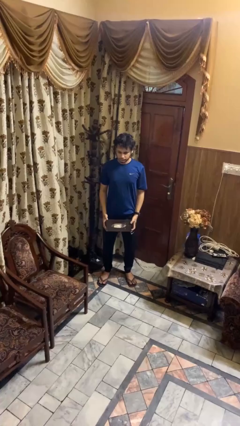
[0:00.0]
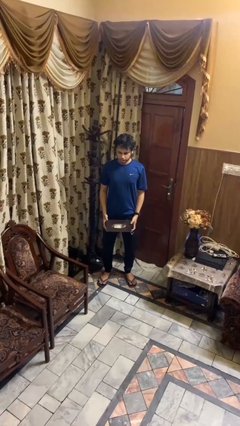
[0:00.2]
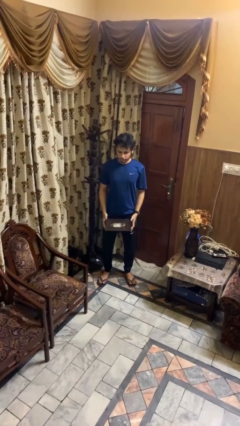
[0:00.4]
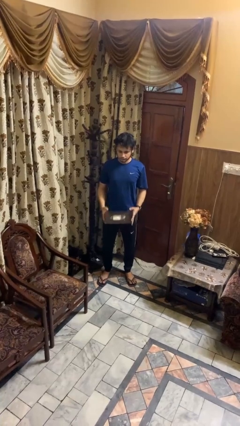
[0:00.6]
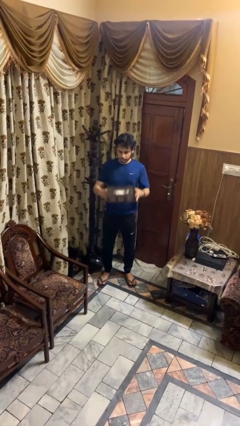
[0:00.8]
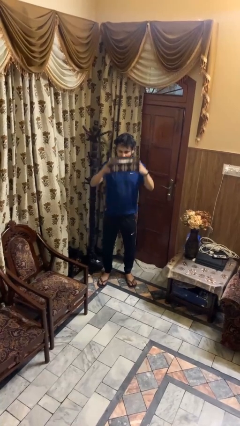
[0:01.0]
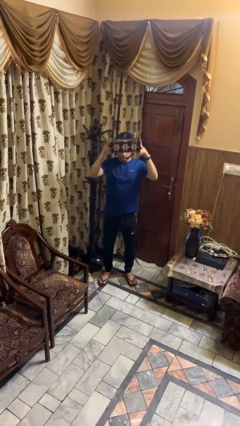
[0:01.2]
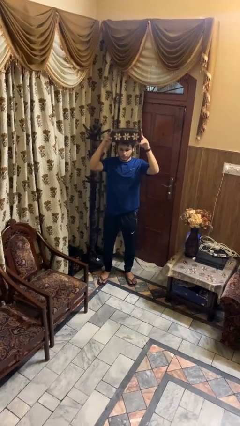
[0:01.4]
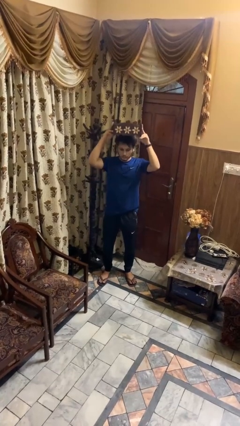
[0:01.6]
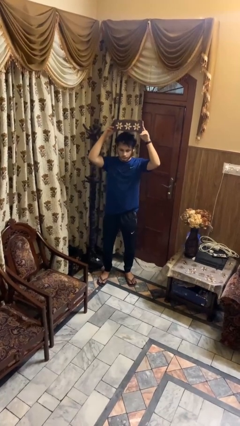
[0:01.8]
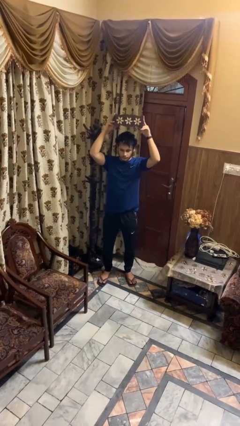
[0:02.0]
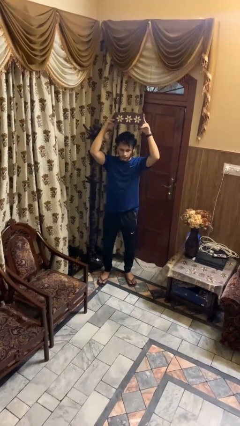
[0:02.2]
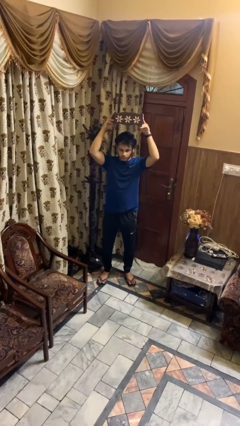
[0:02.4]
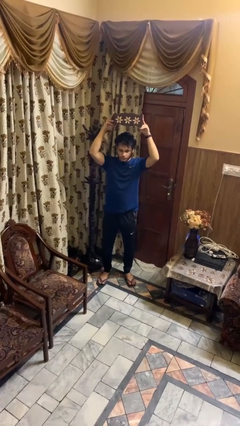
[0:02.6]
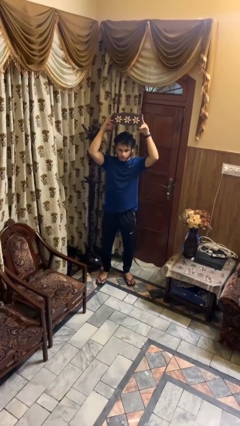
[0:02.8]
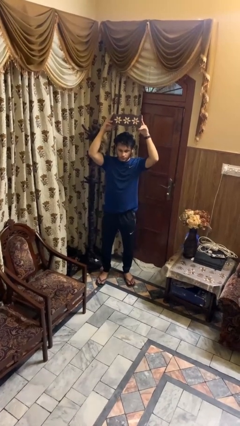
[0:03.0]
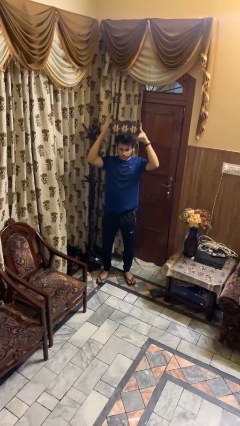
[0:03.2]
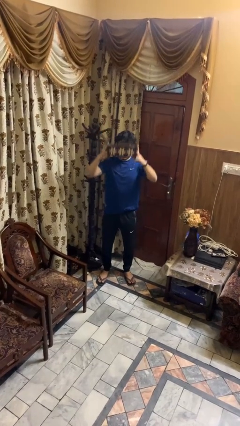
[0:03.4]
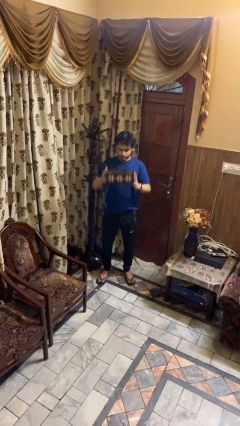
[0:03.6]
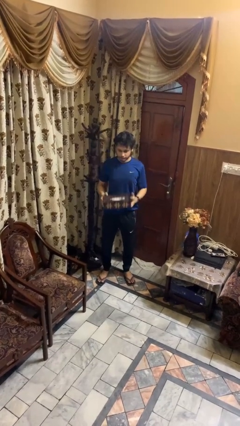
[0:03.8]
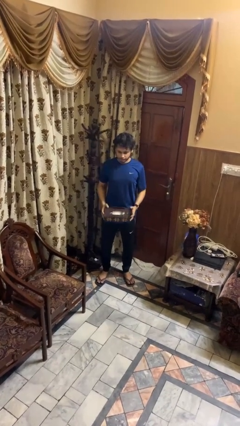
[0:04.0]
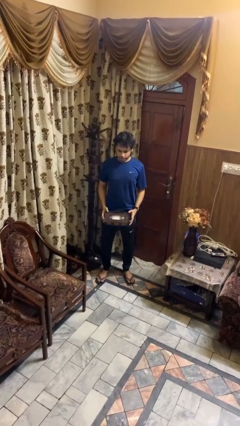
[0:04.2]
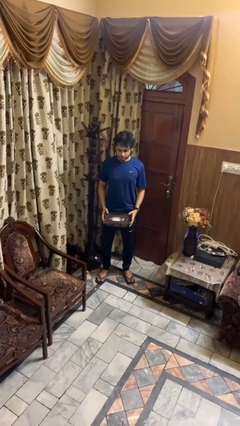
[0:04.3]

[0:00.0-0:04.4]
person holds object above head

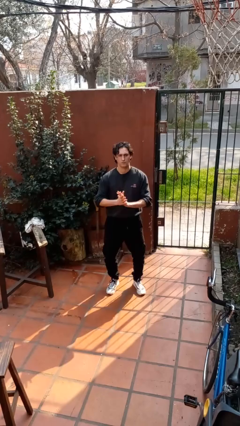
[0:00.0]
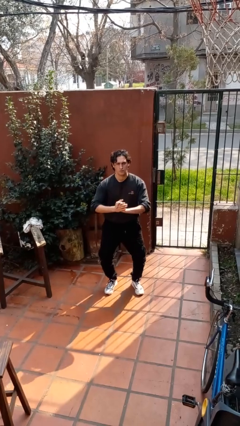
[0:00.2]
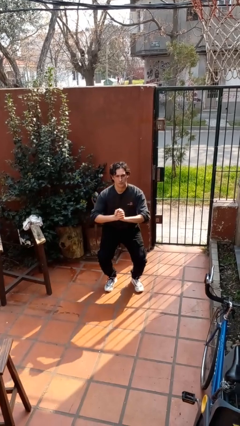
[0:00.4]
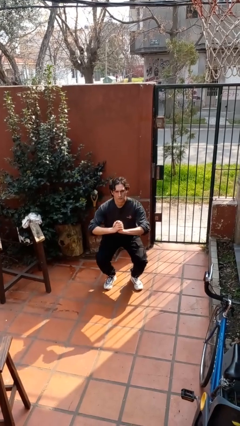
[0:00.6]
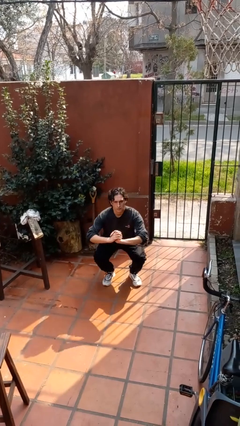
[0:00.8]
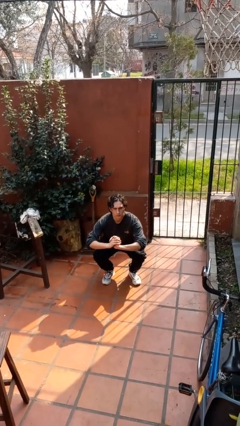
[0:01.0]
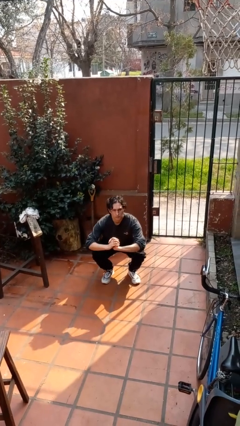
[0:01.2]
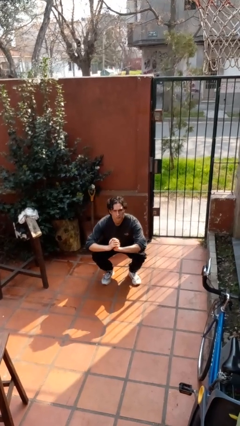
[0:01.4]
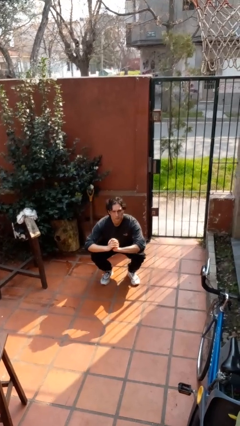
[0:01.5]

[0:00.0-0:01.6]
person squats

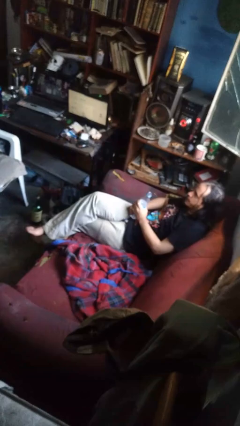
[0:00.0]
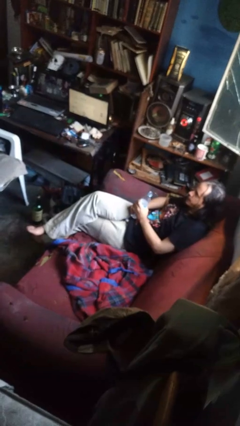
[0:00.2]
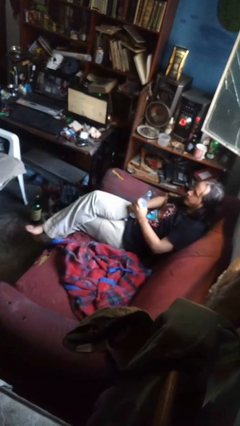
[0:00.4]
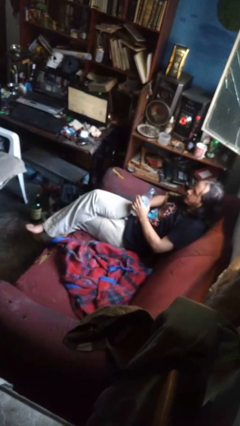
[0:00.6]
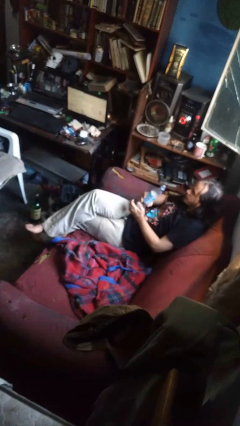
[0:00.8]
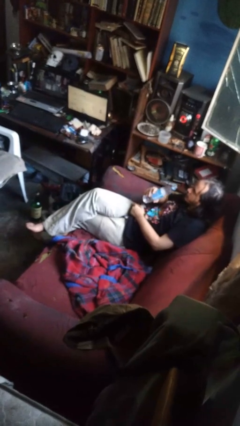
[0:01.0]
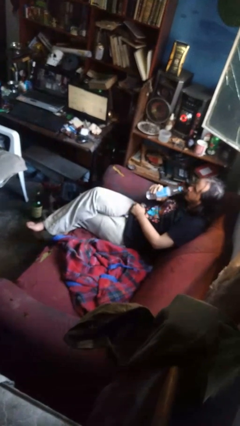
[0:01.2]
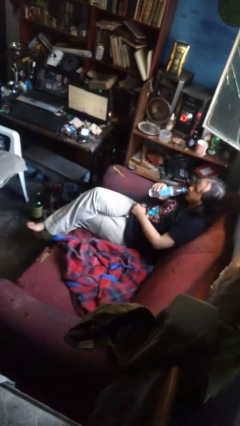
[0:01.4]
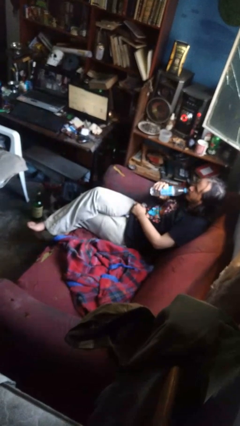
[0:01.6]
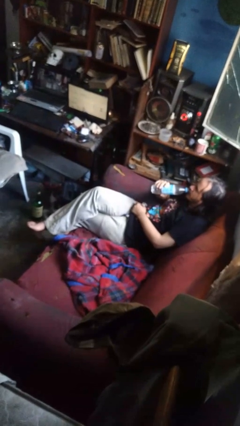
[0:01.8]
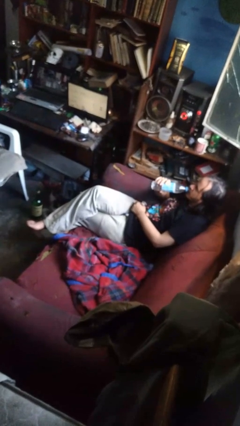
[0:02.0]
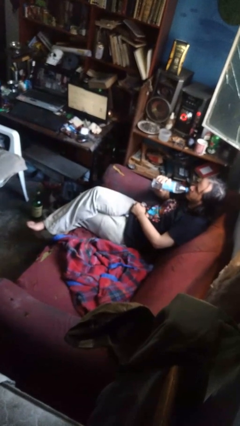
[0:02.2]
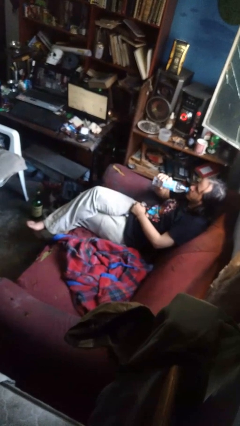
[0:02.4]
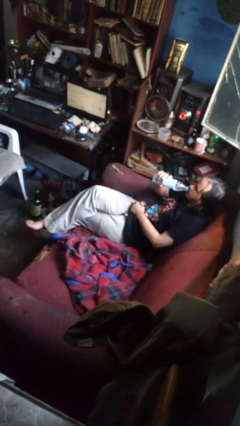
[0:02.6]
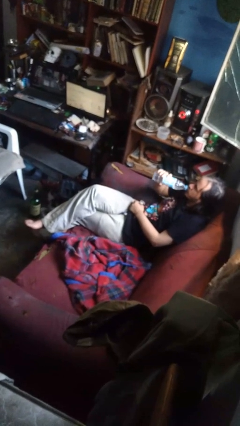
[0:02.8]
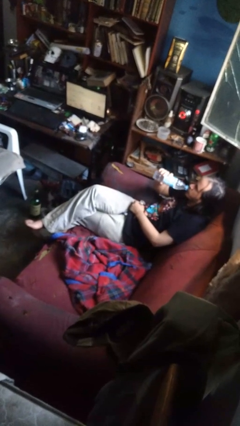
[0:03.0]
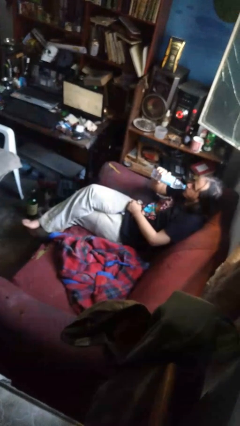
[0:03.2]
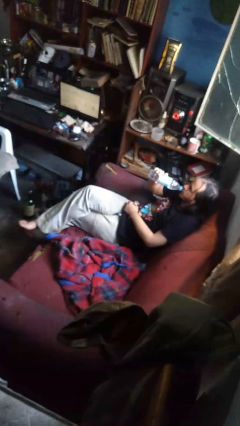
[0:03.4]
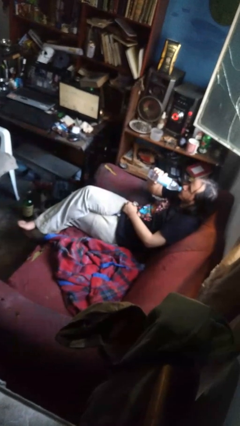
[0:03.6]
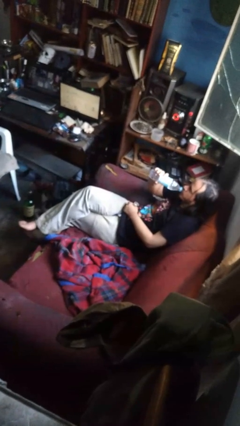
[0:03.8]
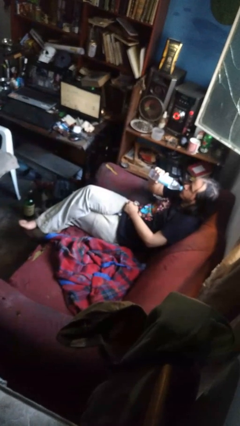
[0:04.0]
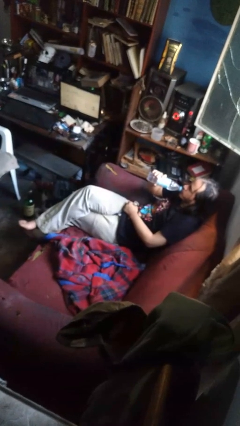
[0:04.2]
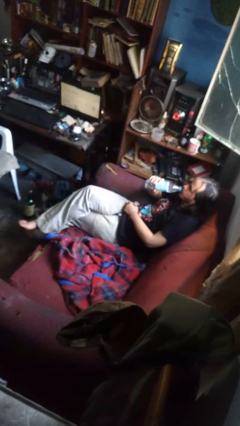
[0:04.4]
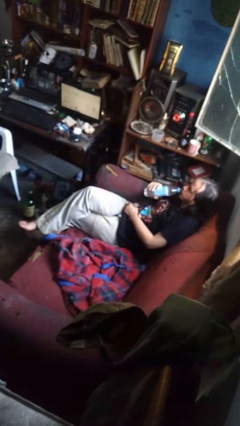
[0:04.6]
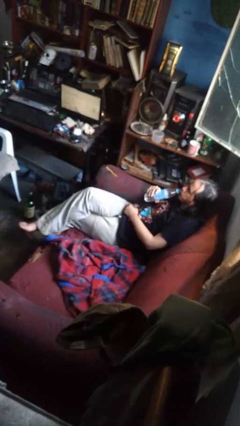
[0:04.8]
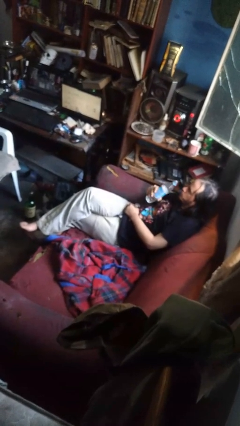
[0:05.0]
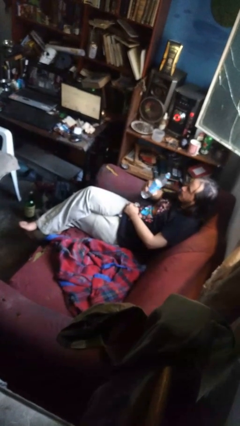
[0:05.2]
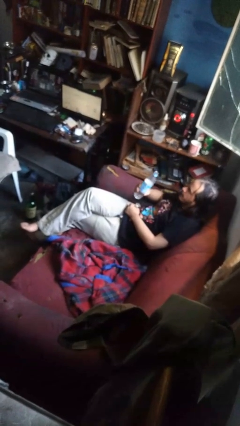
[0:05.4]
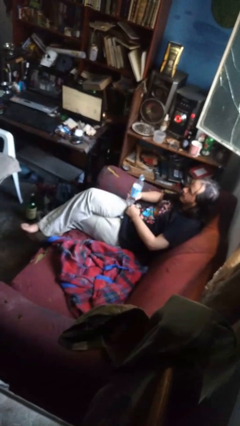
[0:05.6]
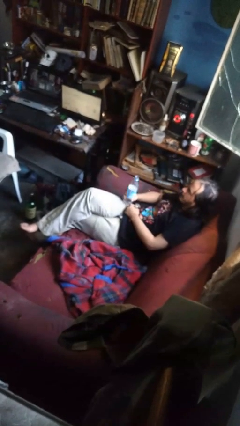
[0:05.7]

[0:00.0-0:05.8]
person drinks from bottle

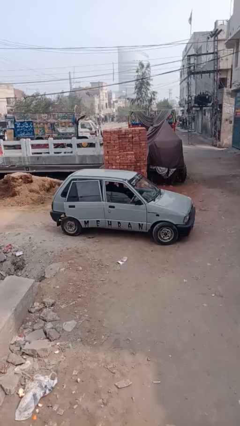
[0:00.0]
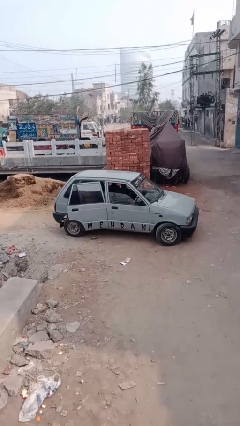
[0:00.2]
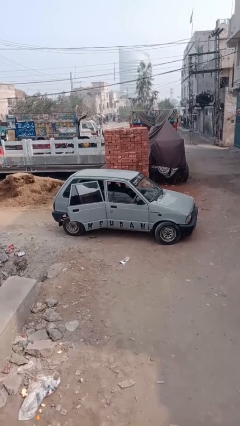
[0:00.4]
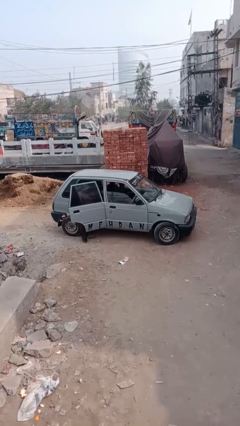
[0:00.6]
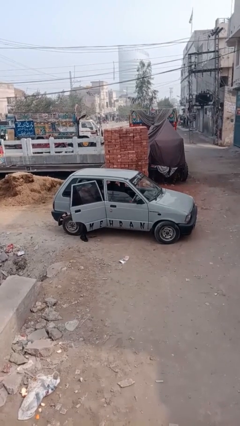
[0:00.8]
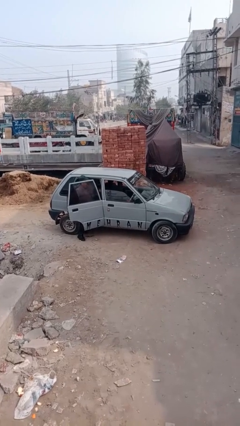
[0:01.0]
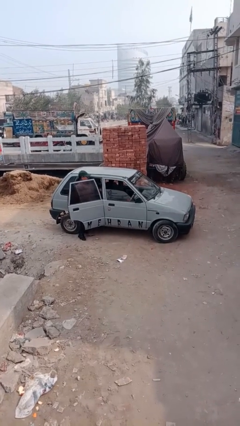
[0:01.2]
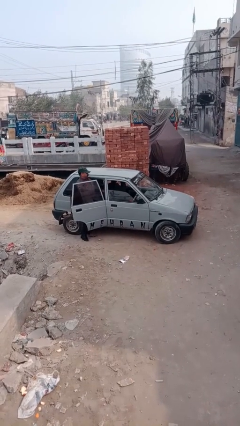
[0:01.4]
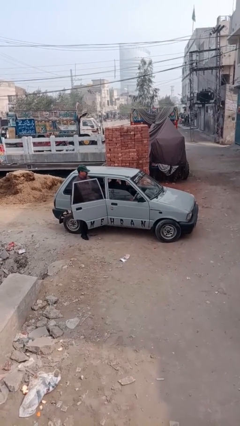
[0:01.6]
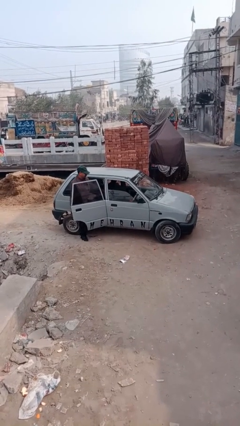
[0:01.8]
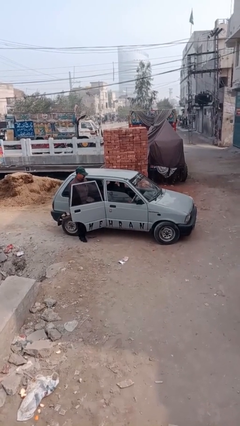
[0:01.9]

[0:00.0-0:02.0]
car drops off person

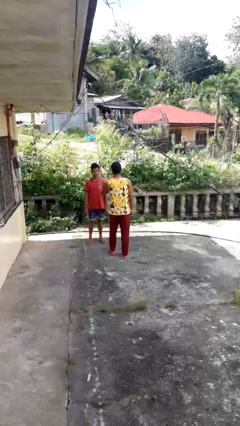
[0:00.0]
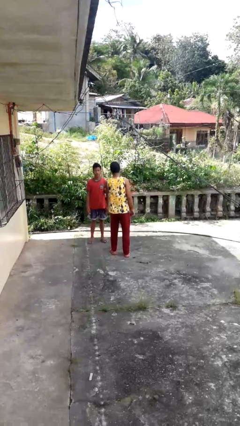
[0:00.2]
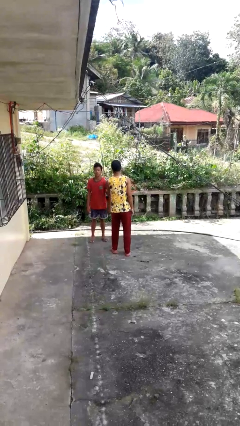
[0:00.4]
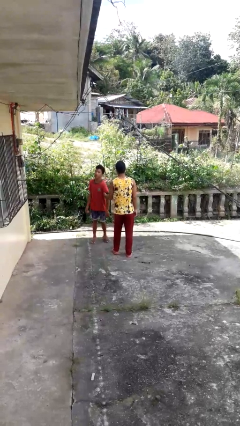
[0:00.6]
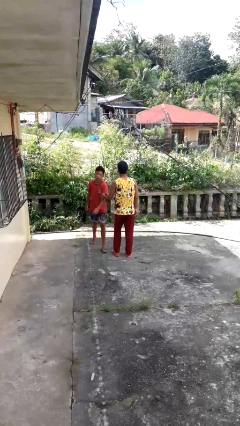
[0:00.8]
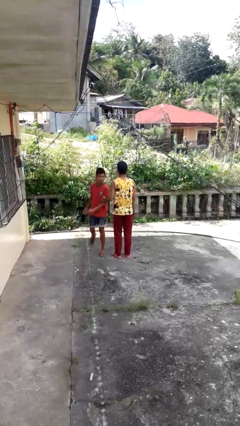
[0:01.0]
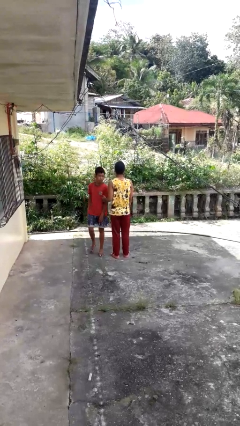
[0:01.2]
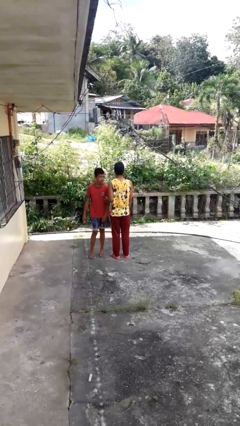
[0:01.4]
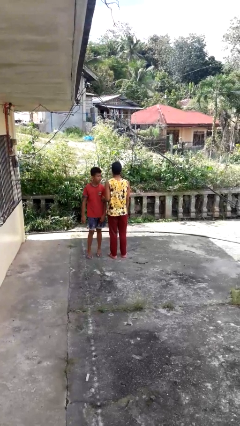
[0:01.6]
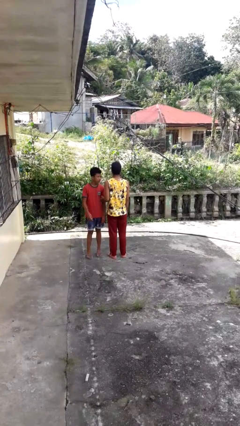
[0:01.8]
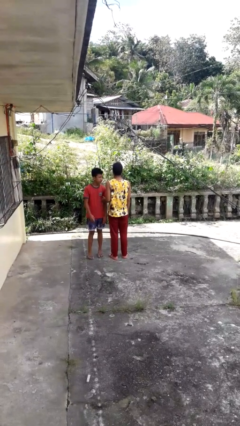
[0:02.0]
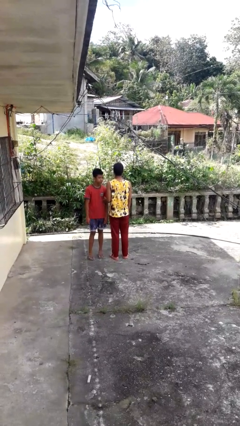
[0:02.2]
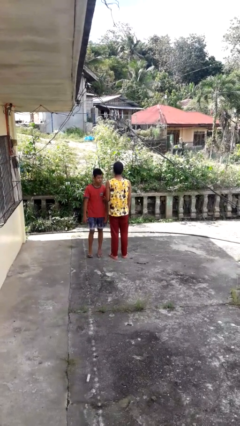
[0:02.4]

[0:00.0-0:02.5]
person grabs person by bicep

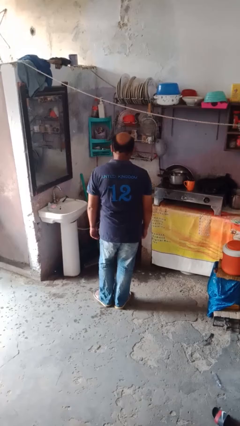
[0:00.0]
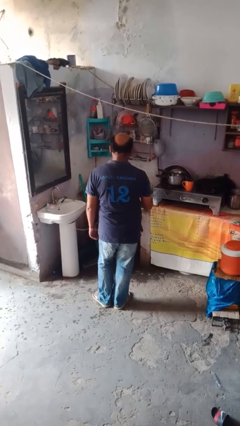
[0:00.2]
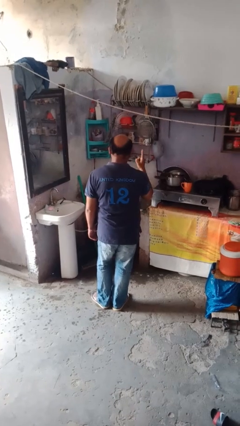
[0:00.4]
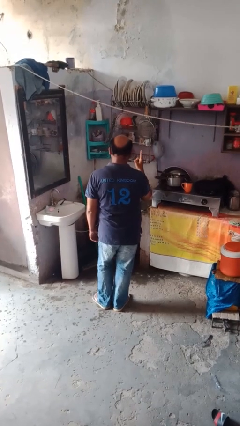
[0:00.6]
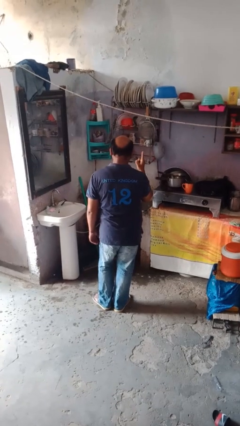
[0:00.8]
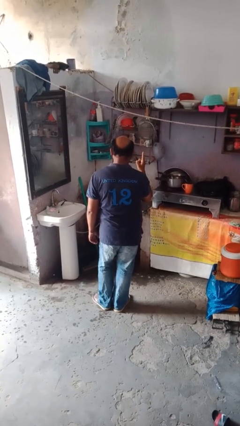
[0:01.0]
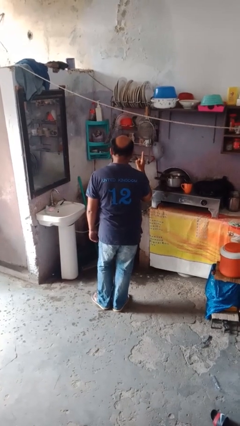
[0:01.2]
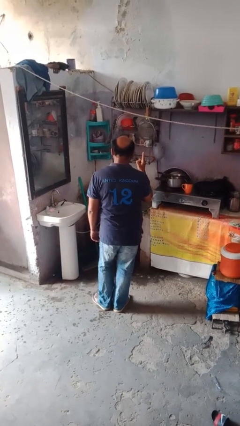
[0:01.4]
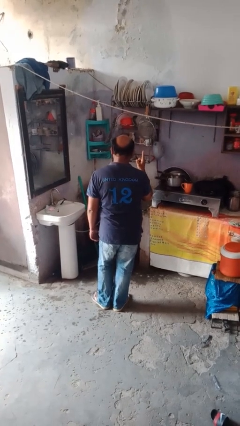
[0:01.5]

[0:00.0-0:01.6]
person gestures number one
